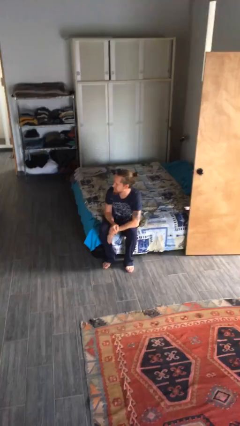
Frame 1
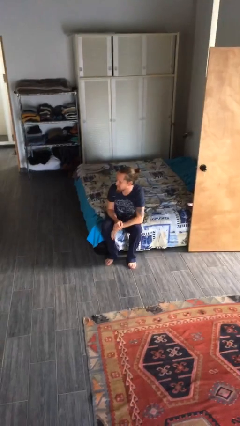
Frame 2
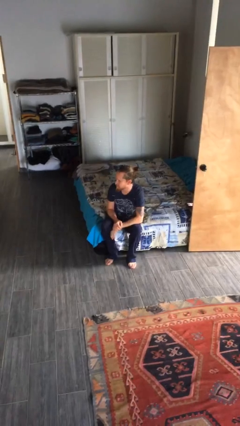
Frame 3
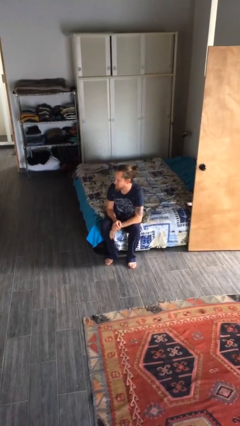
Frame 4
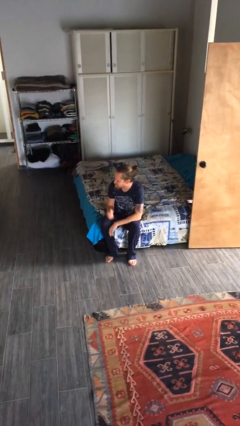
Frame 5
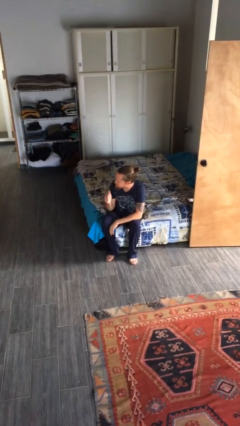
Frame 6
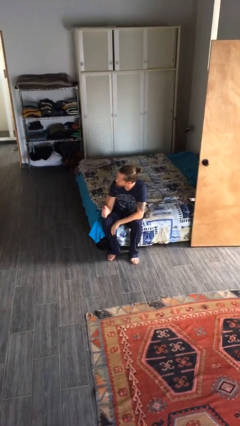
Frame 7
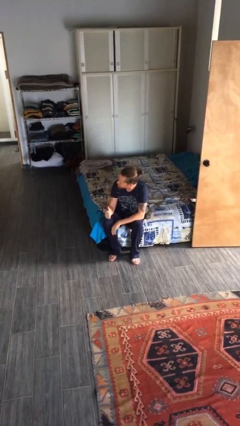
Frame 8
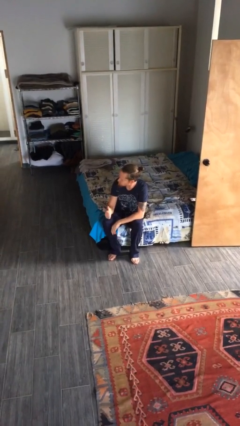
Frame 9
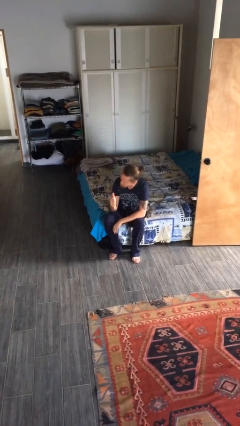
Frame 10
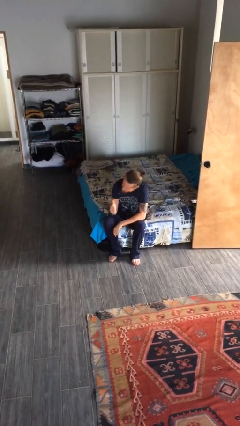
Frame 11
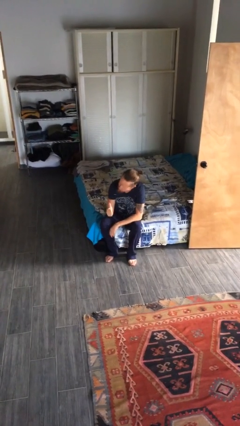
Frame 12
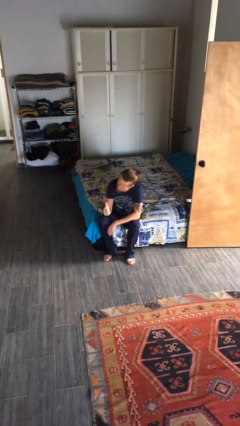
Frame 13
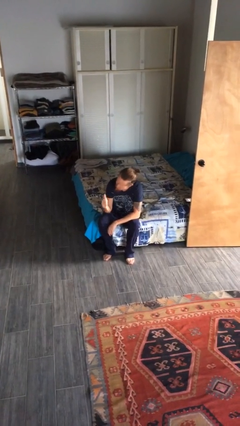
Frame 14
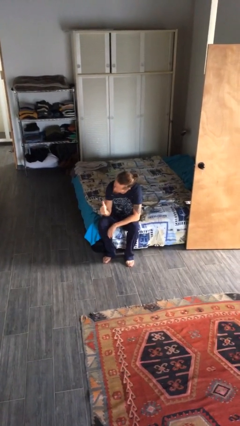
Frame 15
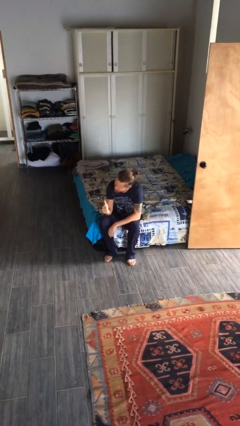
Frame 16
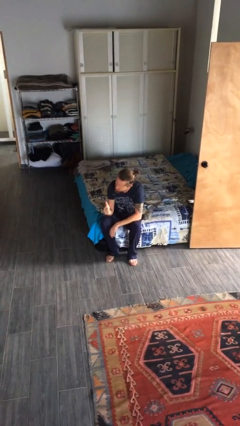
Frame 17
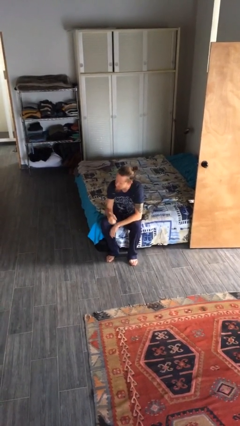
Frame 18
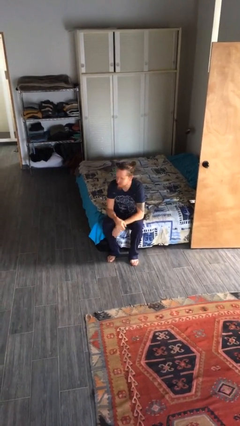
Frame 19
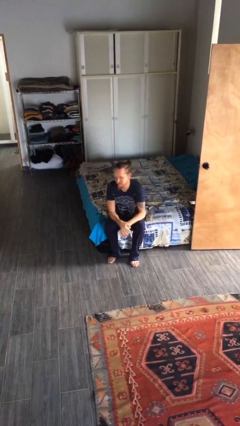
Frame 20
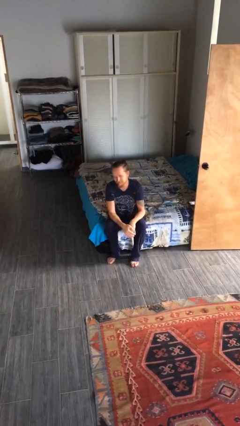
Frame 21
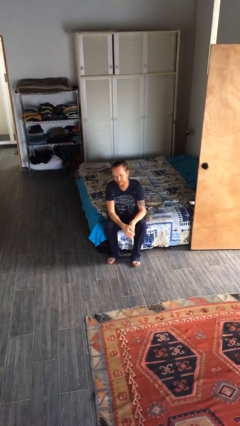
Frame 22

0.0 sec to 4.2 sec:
person gestures thumbs up

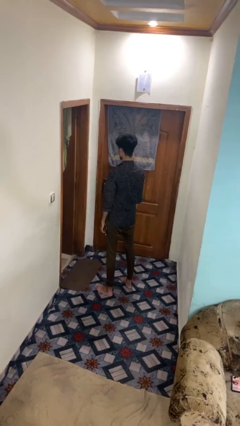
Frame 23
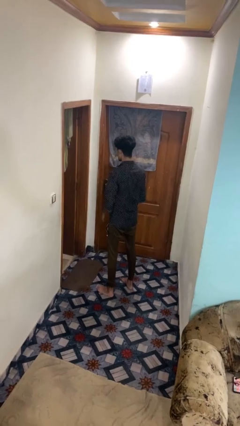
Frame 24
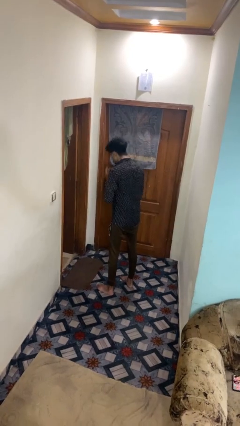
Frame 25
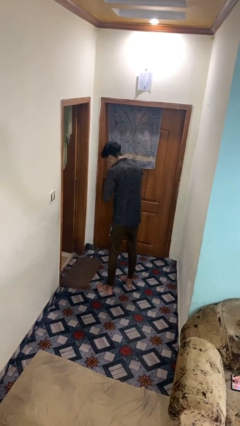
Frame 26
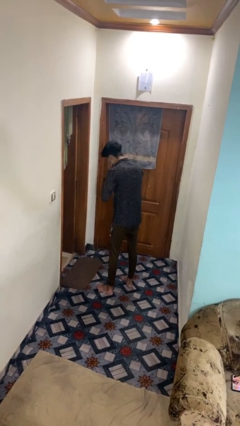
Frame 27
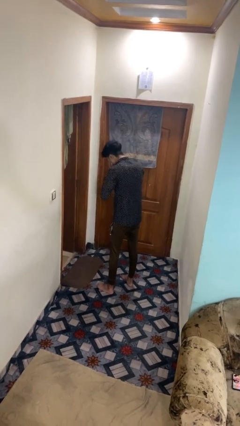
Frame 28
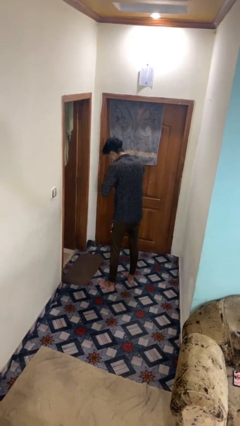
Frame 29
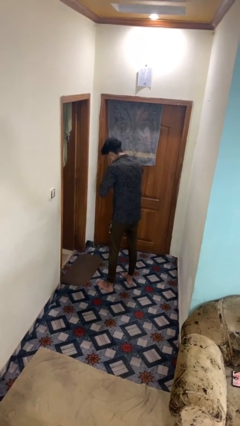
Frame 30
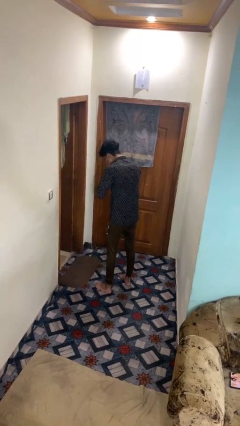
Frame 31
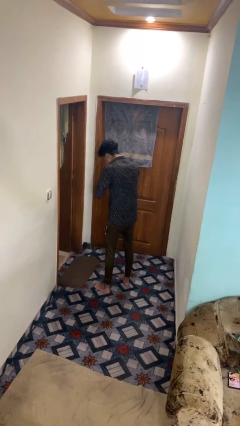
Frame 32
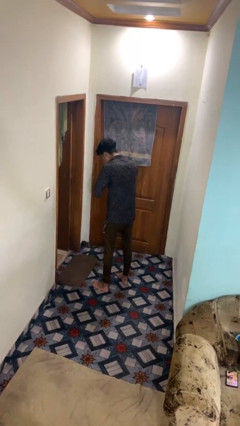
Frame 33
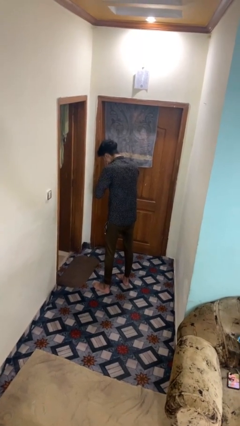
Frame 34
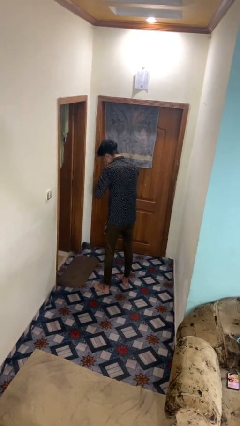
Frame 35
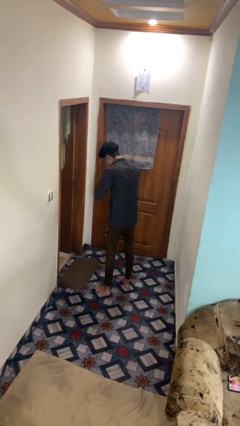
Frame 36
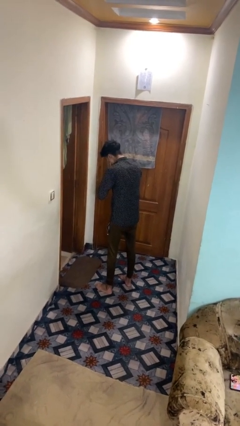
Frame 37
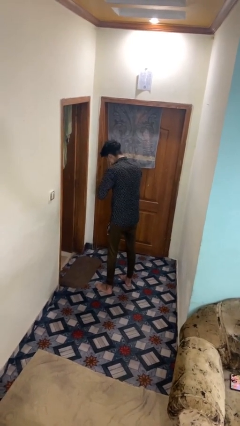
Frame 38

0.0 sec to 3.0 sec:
person sneezes into hand

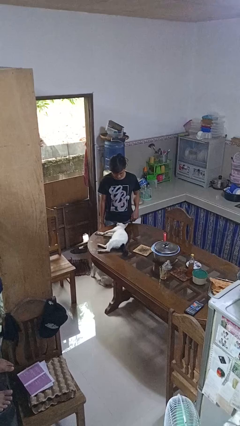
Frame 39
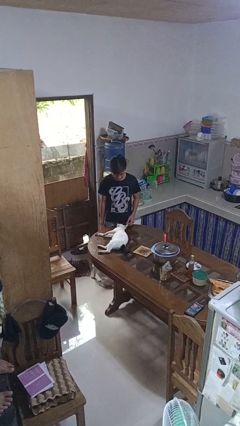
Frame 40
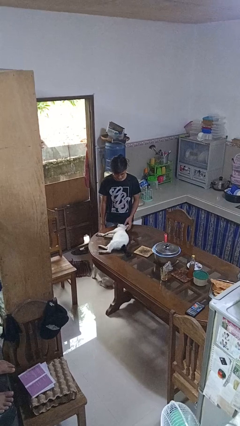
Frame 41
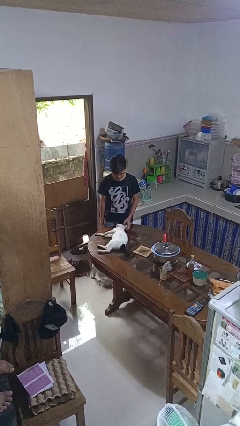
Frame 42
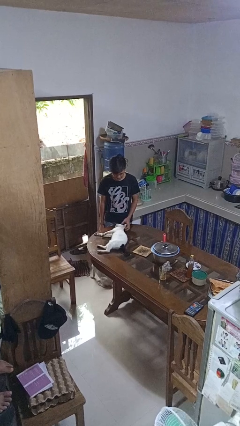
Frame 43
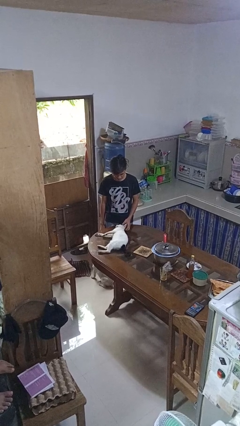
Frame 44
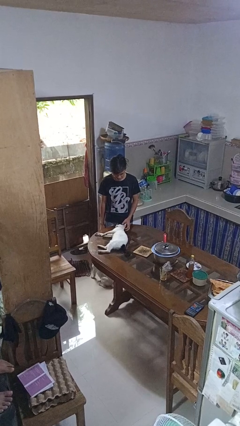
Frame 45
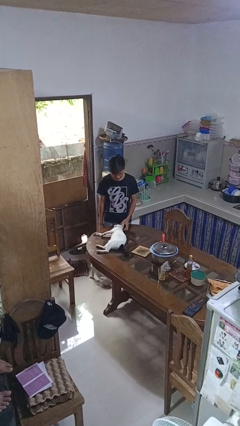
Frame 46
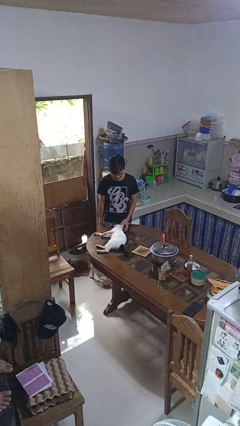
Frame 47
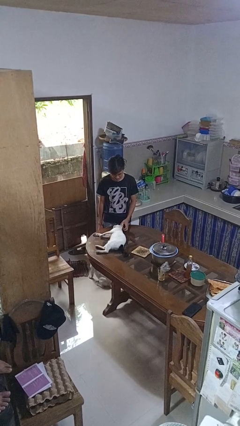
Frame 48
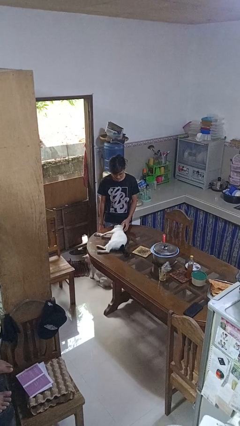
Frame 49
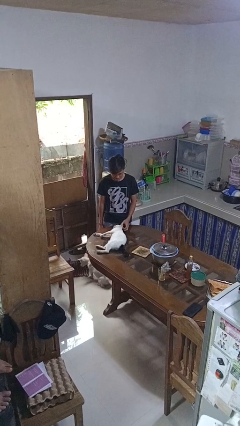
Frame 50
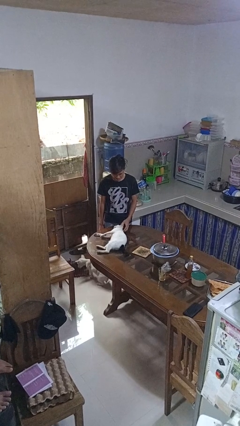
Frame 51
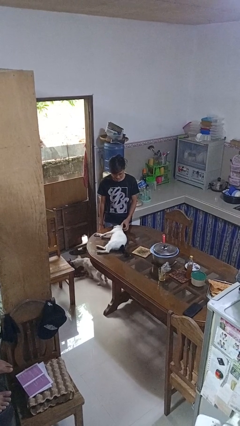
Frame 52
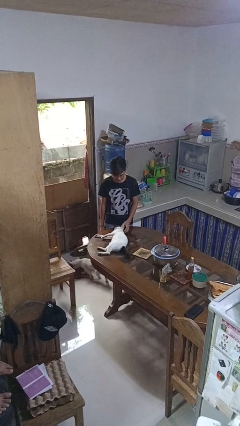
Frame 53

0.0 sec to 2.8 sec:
person pets cat

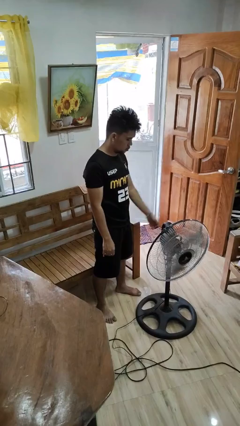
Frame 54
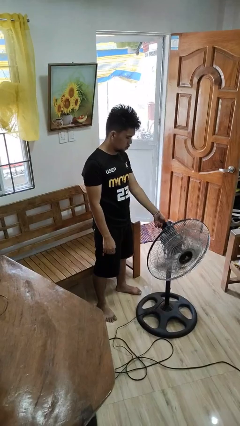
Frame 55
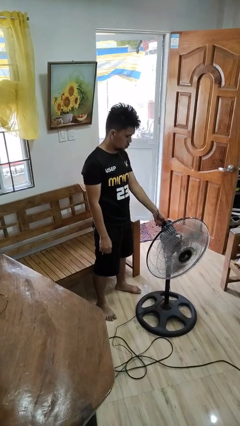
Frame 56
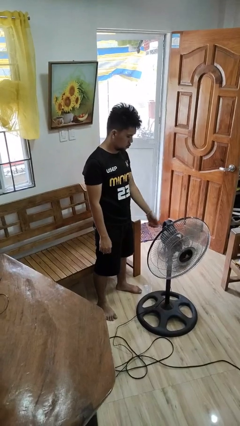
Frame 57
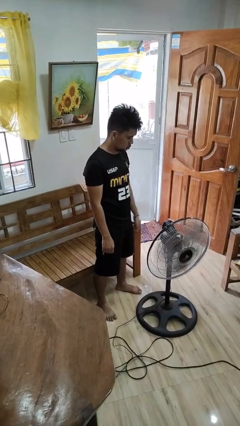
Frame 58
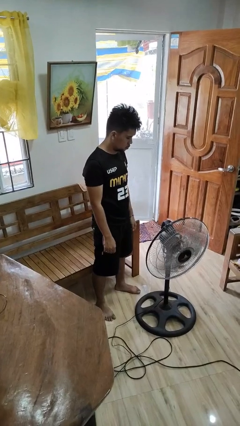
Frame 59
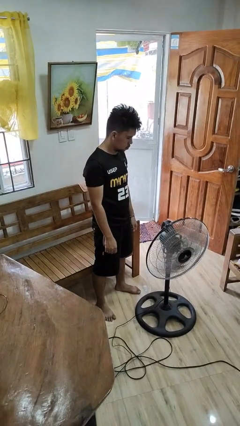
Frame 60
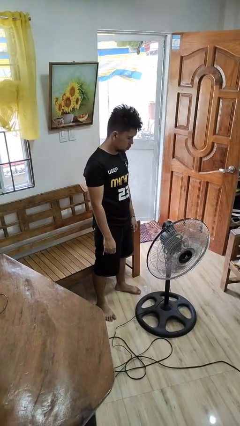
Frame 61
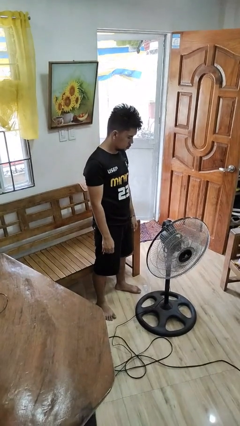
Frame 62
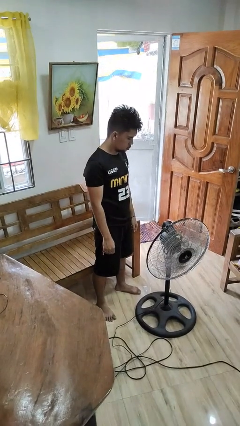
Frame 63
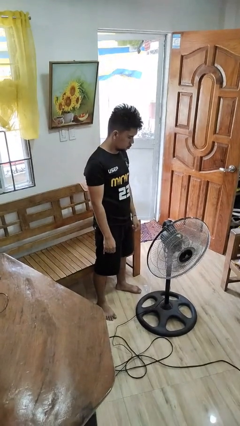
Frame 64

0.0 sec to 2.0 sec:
person turns on fan

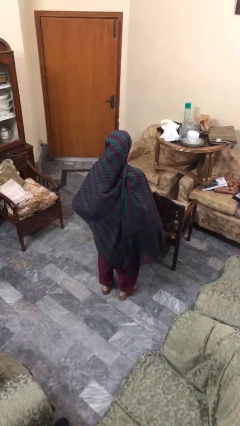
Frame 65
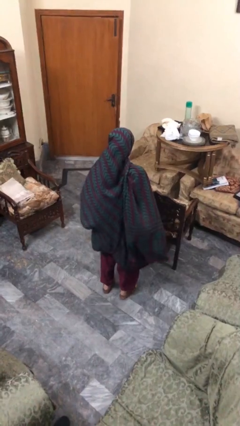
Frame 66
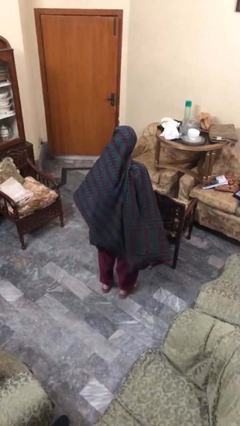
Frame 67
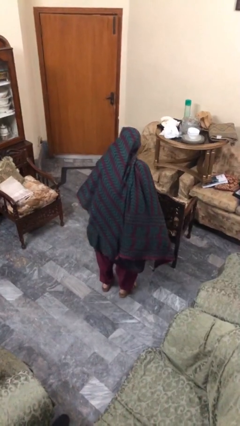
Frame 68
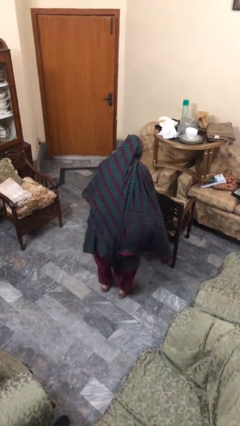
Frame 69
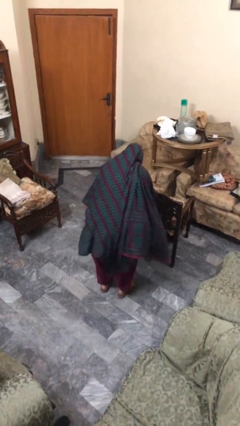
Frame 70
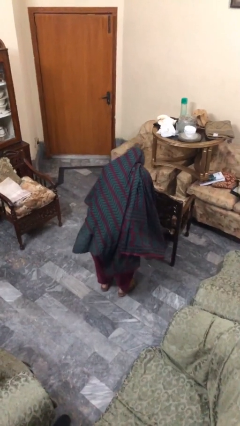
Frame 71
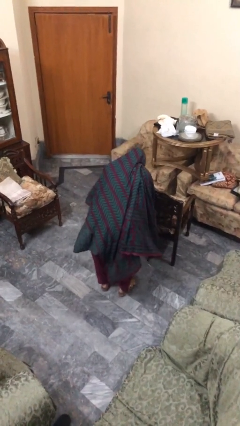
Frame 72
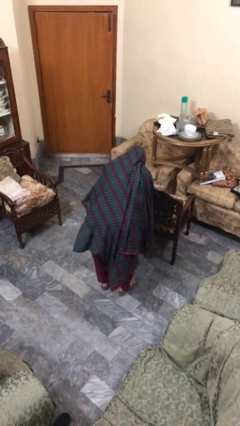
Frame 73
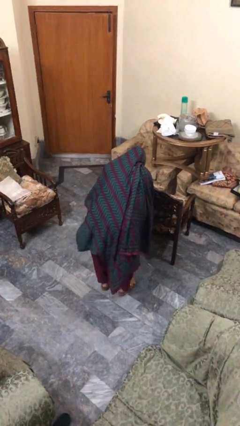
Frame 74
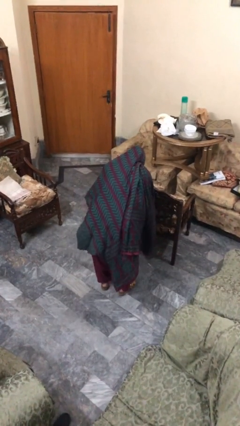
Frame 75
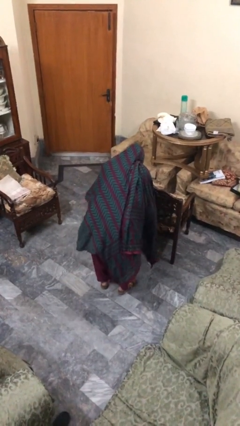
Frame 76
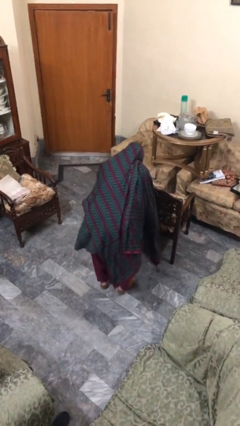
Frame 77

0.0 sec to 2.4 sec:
person bows

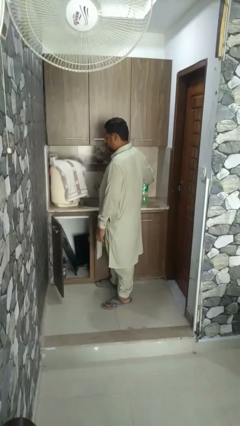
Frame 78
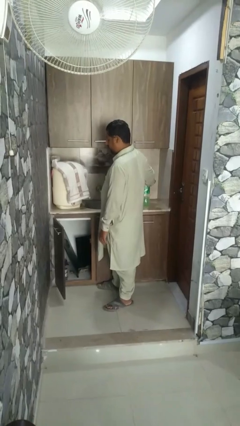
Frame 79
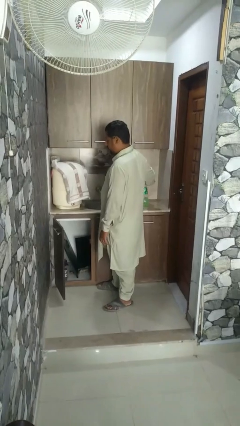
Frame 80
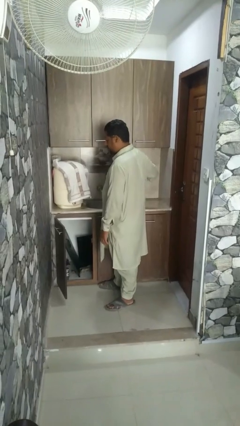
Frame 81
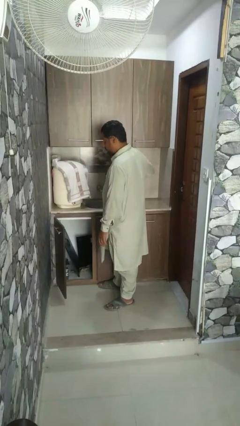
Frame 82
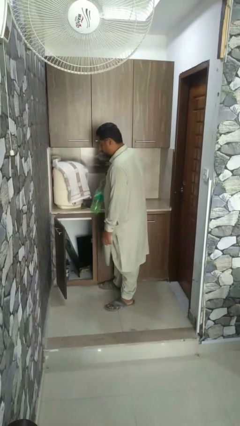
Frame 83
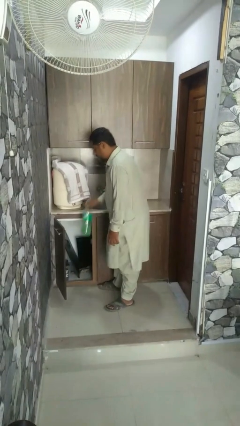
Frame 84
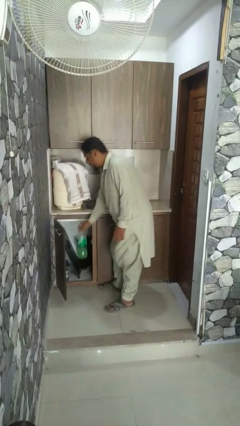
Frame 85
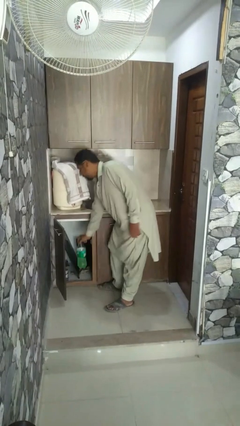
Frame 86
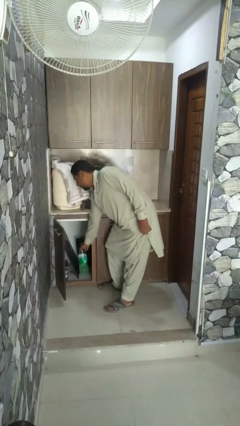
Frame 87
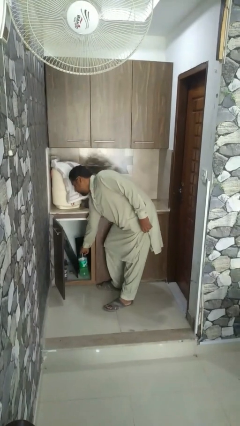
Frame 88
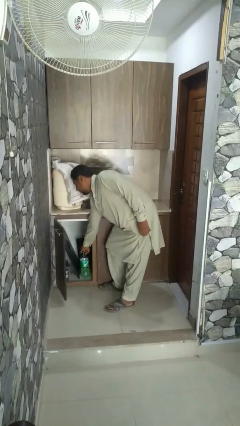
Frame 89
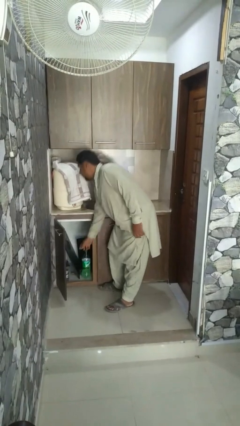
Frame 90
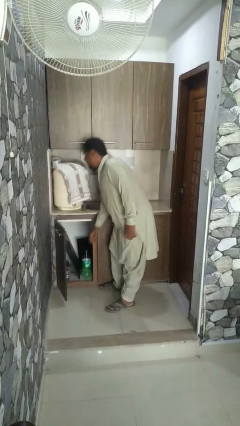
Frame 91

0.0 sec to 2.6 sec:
person puts object into refrigerator

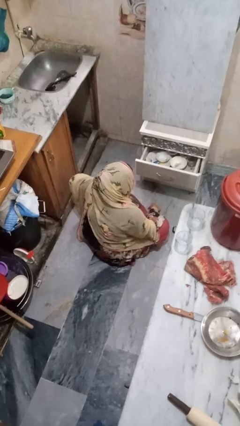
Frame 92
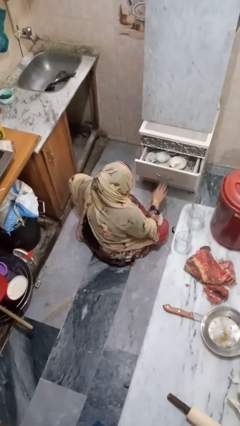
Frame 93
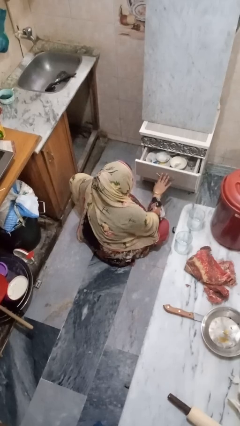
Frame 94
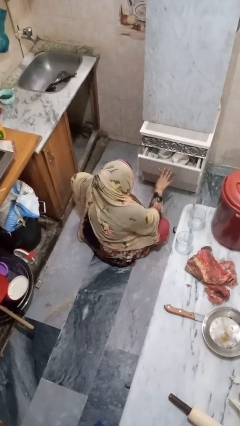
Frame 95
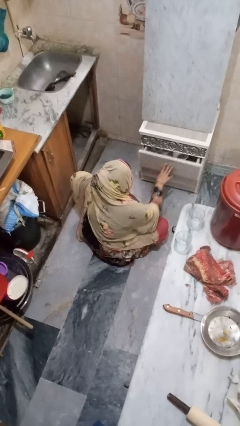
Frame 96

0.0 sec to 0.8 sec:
person closes kitchen drawer
